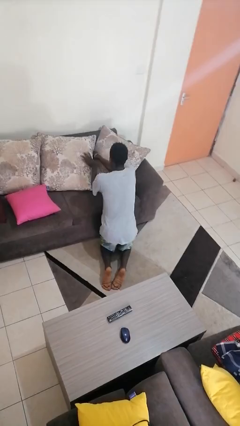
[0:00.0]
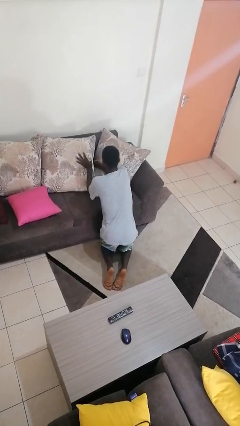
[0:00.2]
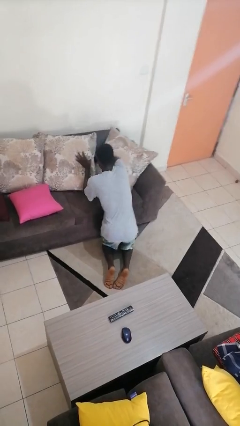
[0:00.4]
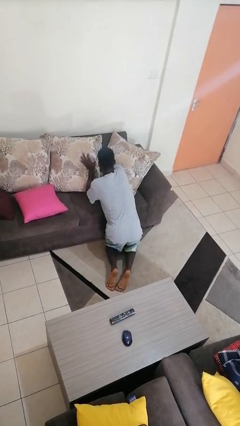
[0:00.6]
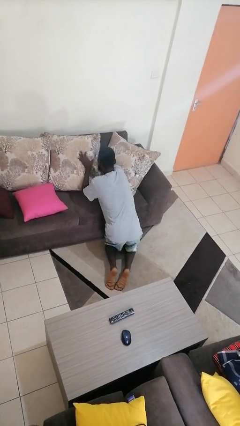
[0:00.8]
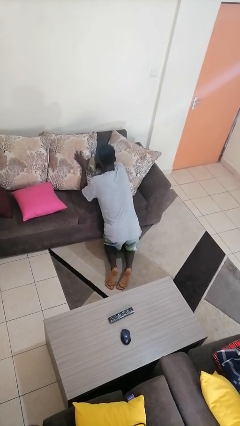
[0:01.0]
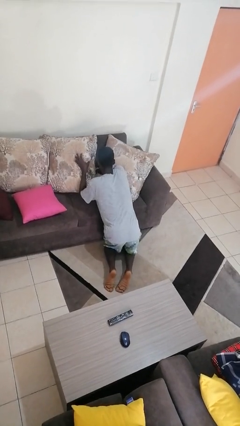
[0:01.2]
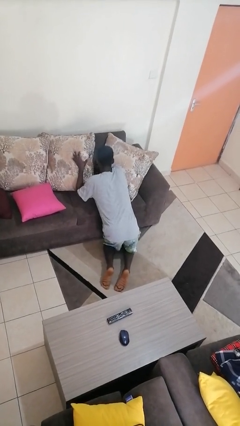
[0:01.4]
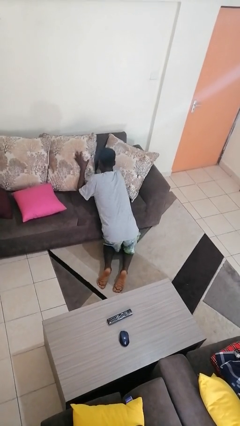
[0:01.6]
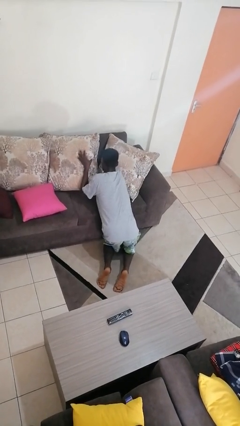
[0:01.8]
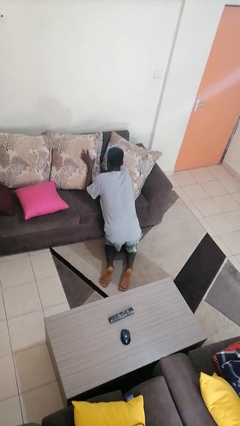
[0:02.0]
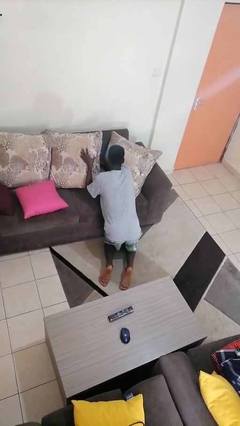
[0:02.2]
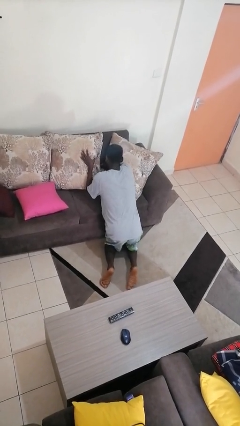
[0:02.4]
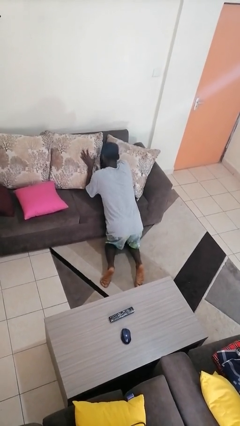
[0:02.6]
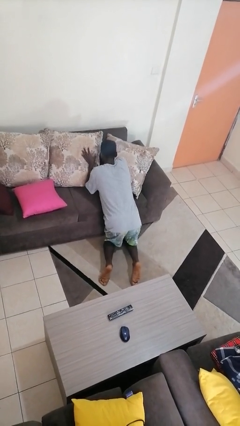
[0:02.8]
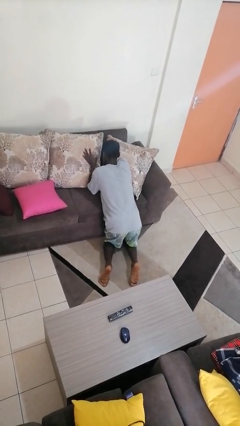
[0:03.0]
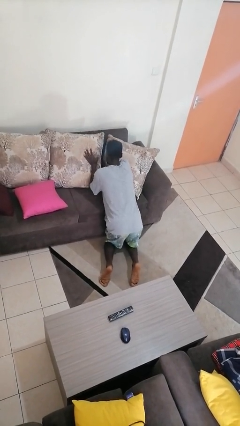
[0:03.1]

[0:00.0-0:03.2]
person searches in couch

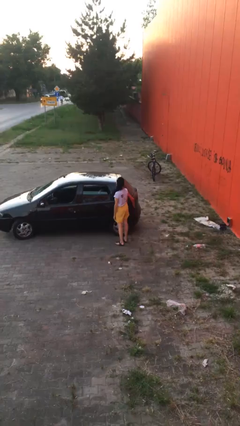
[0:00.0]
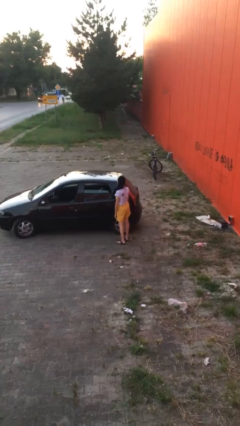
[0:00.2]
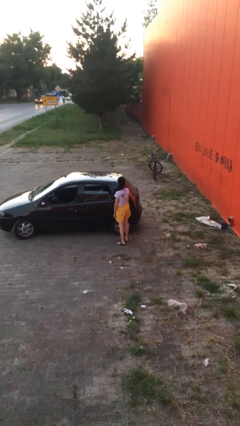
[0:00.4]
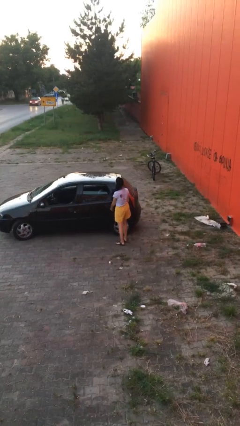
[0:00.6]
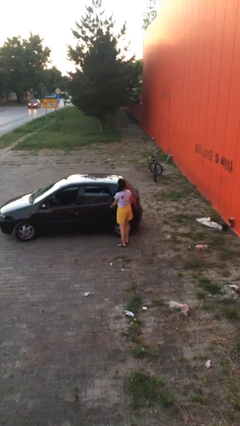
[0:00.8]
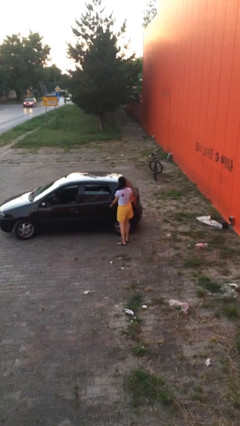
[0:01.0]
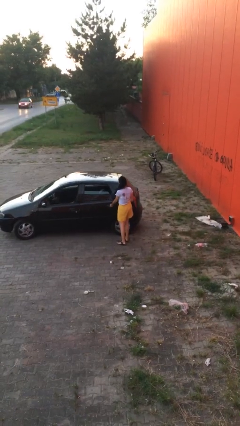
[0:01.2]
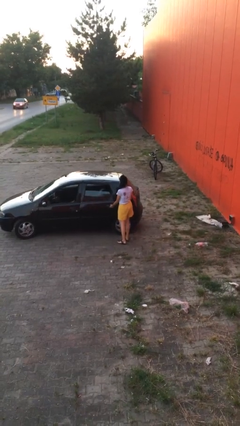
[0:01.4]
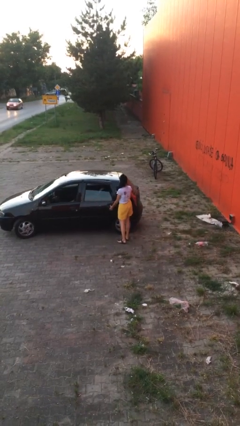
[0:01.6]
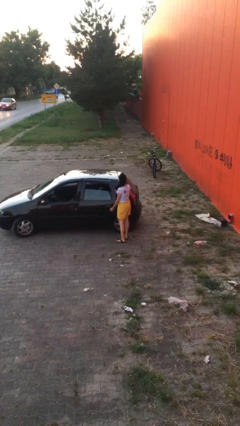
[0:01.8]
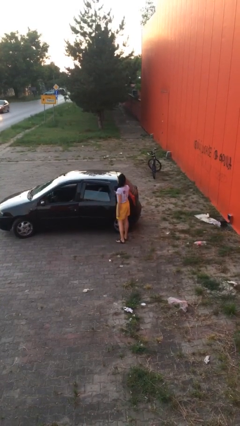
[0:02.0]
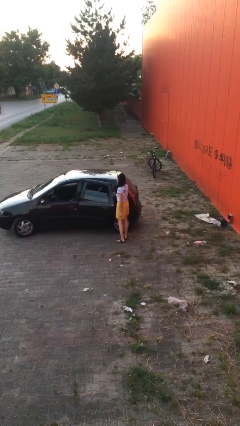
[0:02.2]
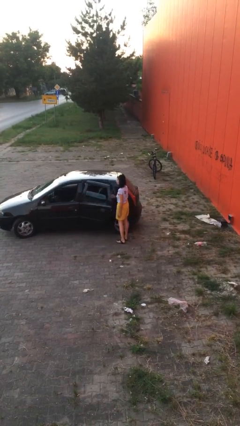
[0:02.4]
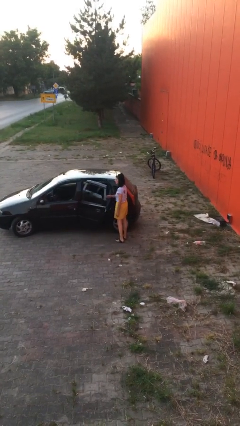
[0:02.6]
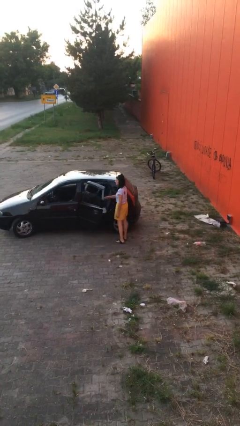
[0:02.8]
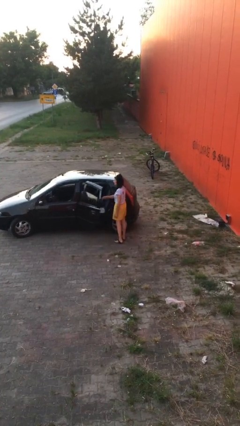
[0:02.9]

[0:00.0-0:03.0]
person opens car door

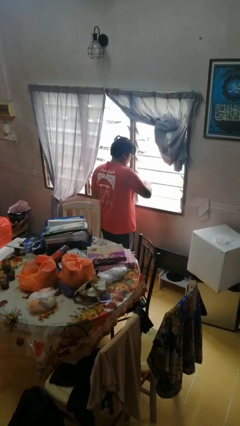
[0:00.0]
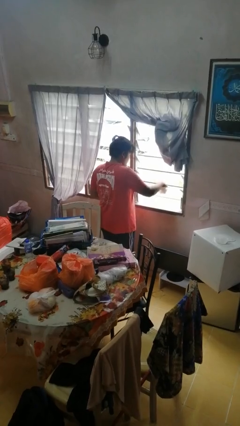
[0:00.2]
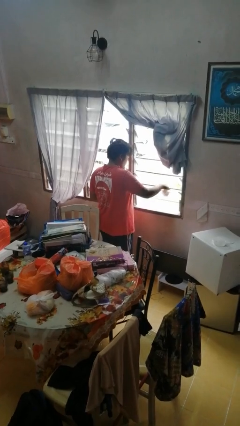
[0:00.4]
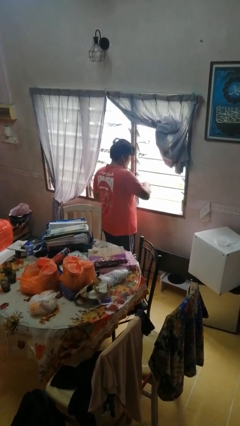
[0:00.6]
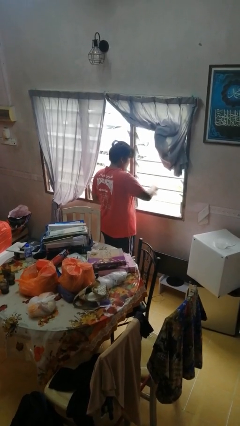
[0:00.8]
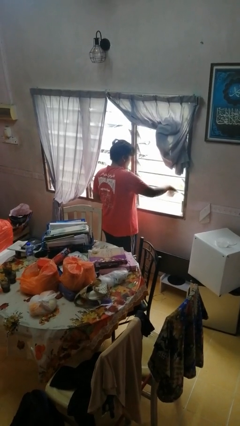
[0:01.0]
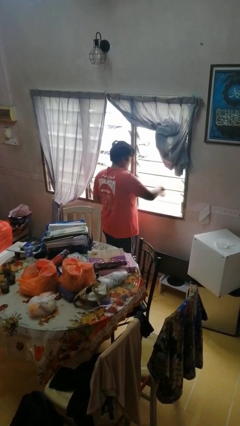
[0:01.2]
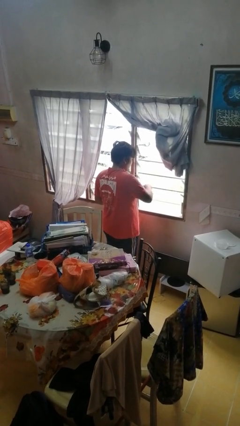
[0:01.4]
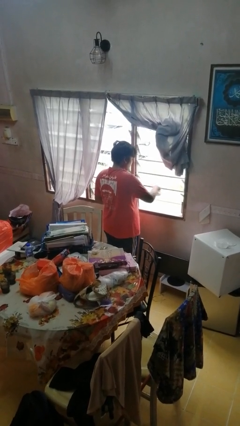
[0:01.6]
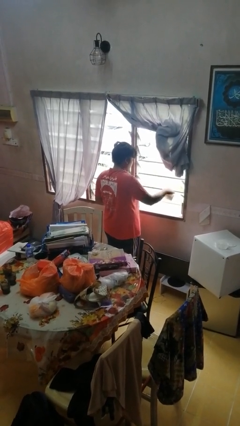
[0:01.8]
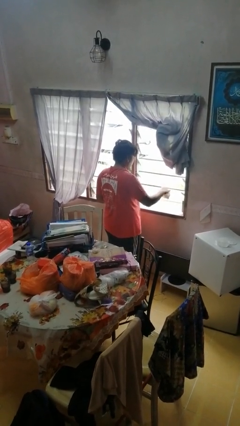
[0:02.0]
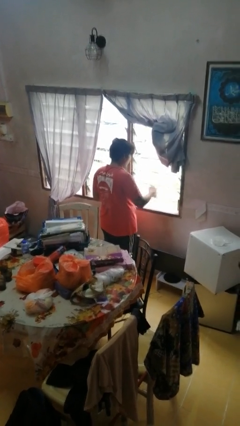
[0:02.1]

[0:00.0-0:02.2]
person washes window

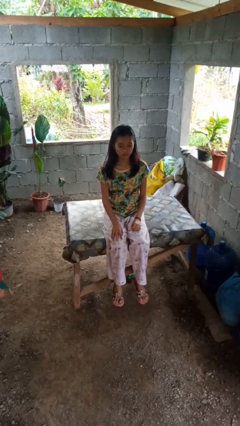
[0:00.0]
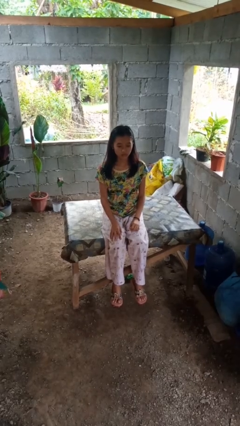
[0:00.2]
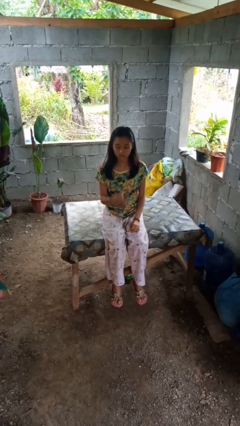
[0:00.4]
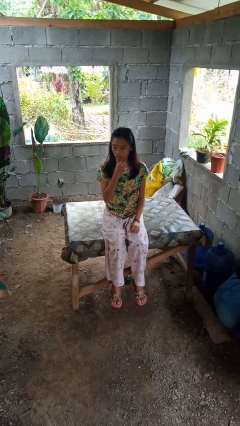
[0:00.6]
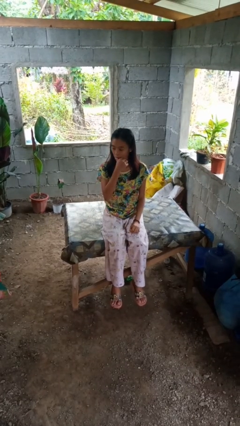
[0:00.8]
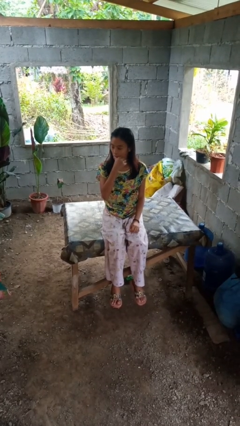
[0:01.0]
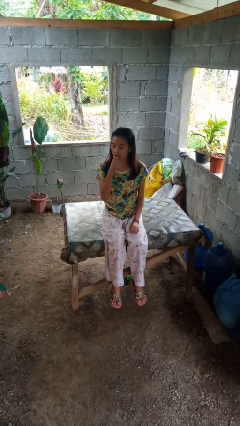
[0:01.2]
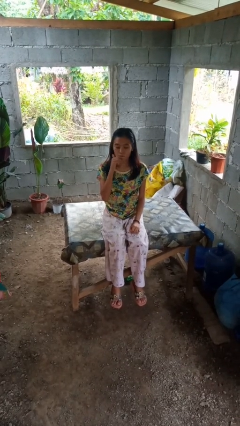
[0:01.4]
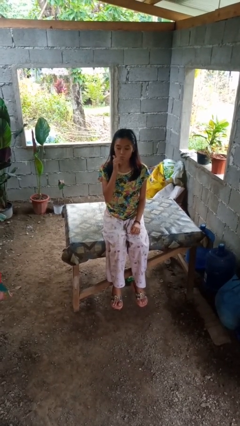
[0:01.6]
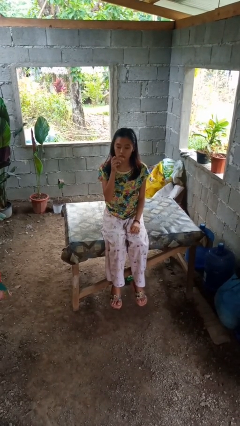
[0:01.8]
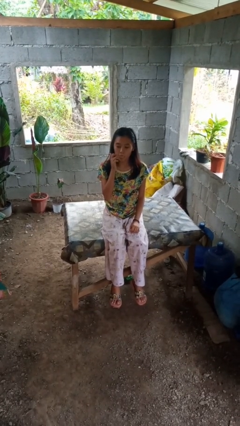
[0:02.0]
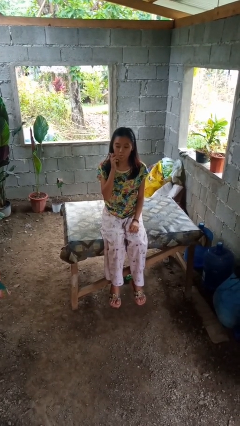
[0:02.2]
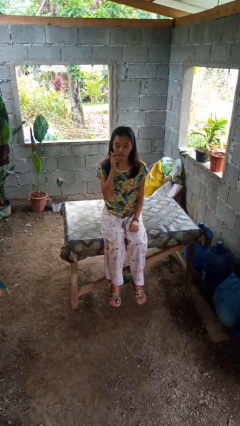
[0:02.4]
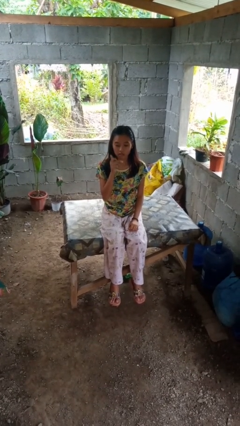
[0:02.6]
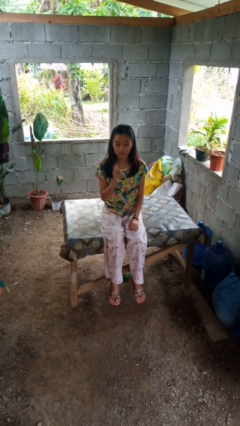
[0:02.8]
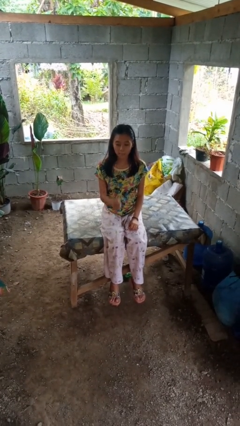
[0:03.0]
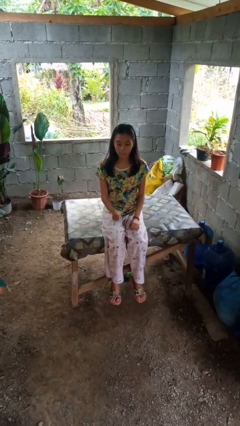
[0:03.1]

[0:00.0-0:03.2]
person licks fingers

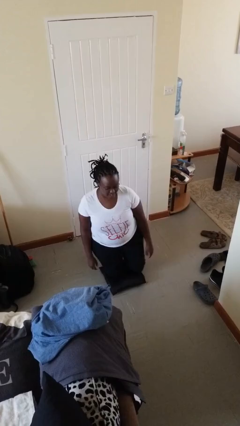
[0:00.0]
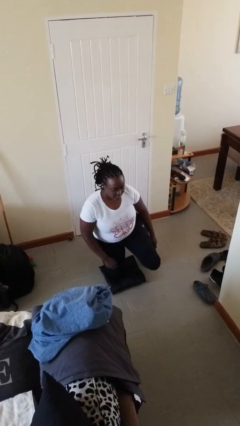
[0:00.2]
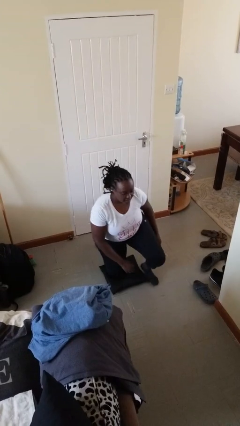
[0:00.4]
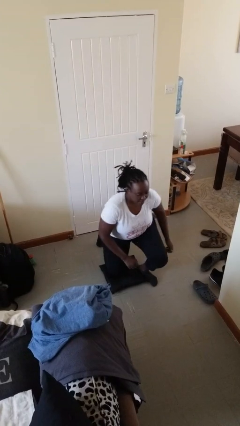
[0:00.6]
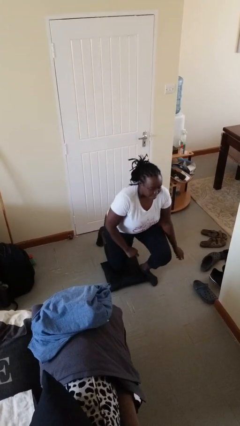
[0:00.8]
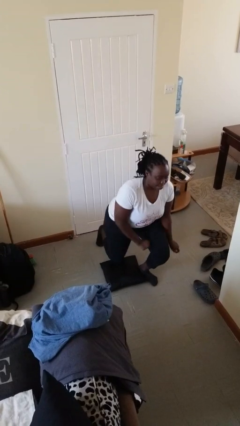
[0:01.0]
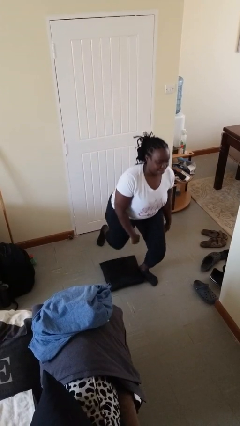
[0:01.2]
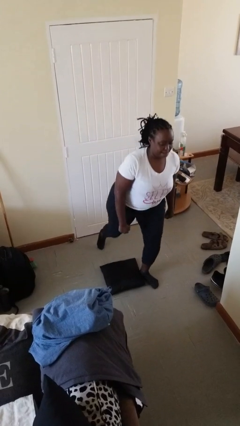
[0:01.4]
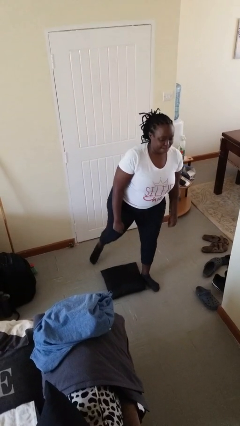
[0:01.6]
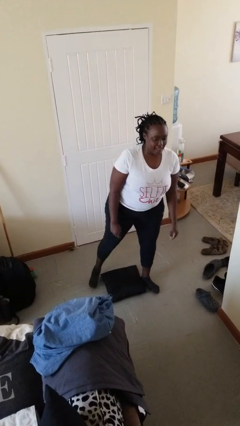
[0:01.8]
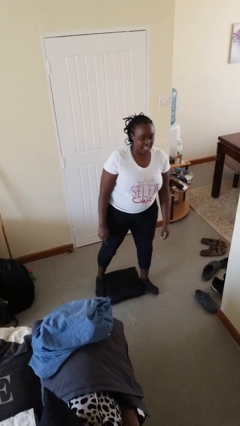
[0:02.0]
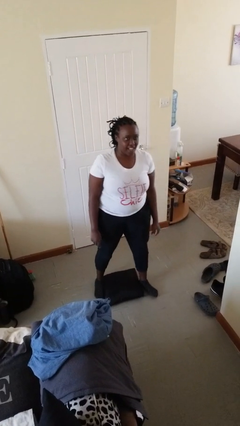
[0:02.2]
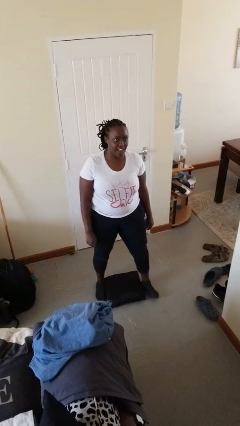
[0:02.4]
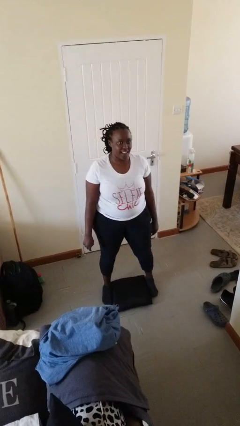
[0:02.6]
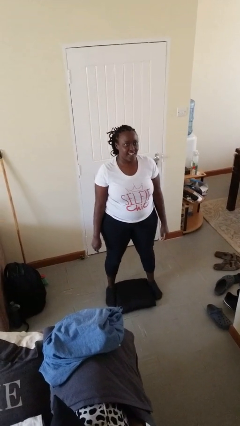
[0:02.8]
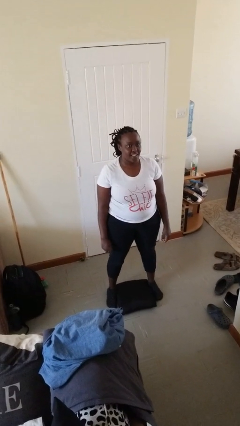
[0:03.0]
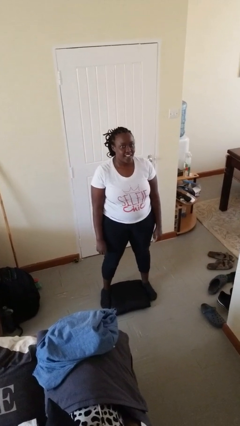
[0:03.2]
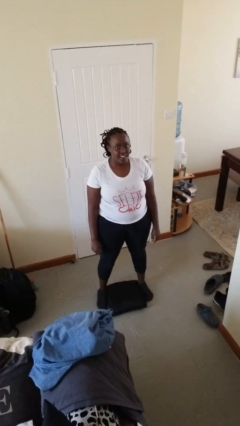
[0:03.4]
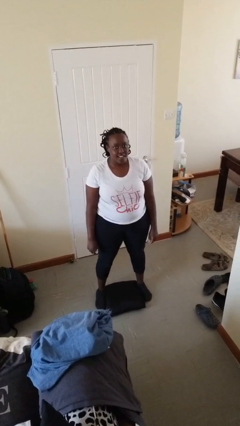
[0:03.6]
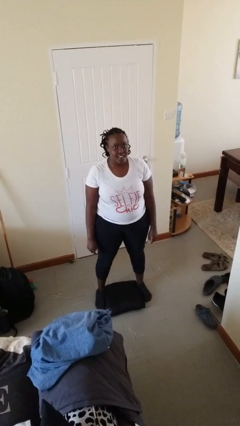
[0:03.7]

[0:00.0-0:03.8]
person stands up from floor

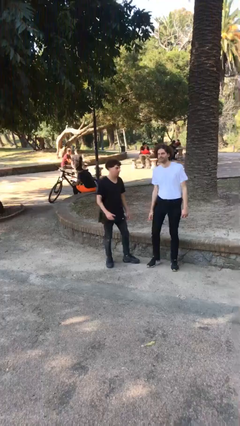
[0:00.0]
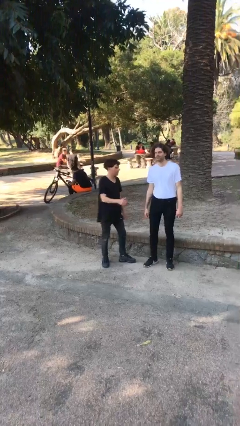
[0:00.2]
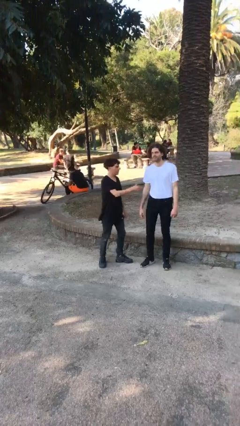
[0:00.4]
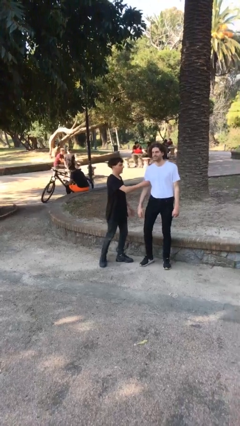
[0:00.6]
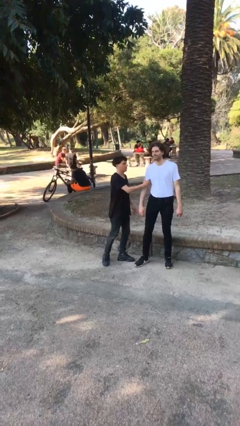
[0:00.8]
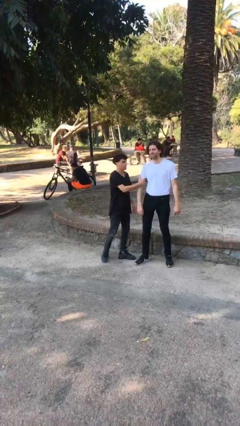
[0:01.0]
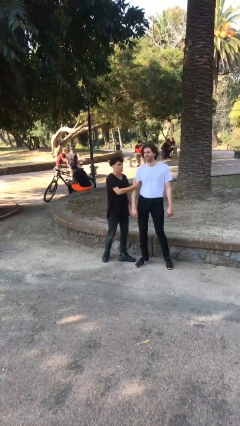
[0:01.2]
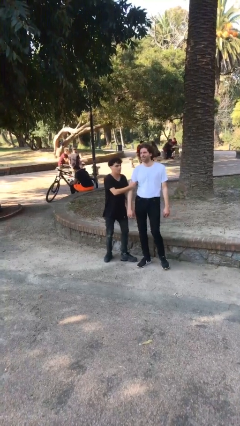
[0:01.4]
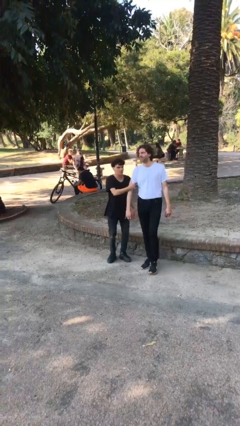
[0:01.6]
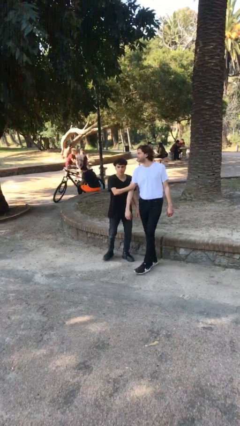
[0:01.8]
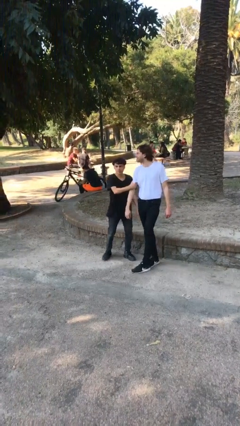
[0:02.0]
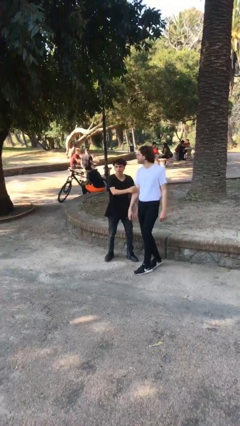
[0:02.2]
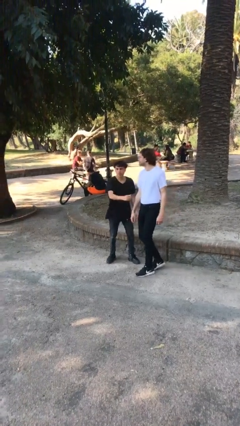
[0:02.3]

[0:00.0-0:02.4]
person grabs person by bicep
